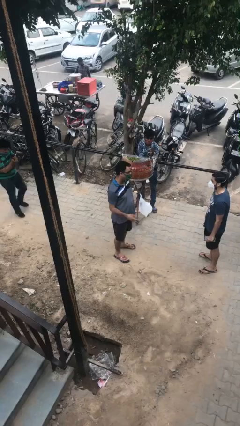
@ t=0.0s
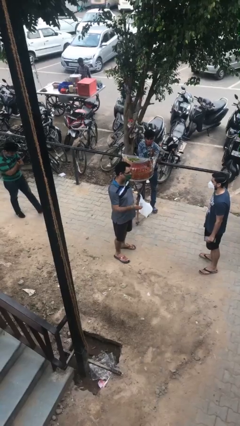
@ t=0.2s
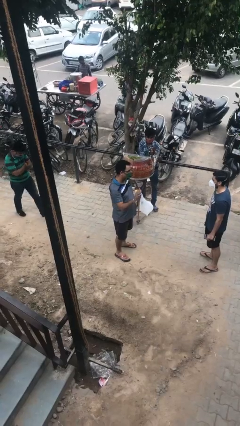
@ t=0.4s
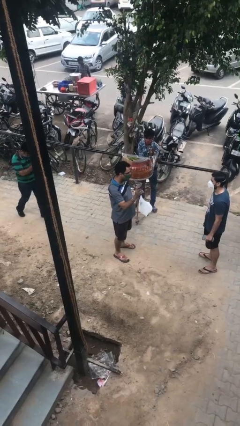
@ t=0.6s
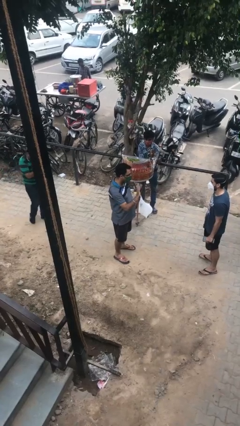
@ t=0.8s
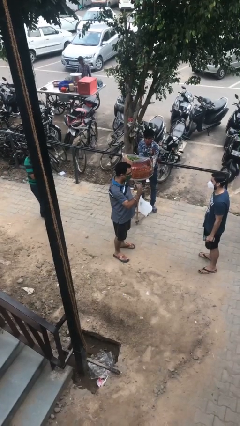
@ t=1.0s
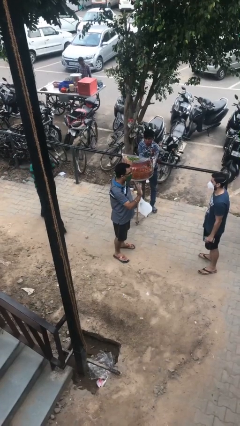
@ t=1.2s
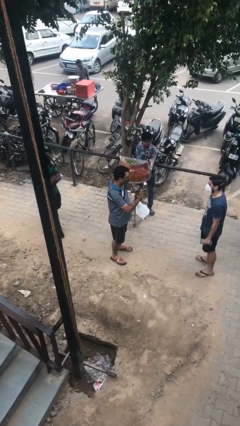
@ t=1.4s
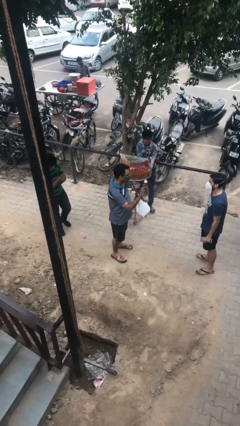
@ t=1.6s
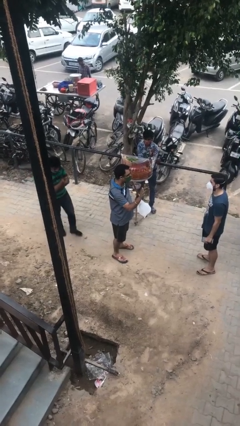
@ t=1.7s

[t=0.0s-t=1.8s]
person waves at person

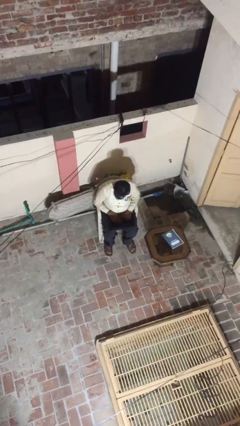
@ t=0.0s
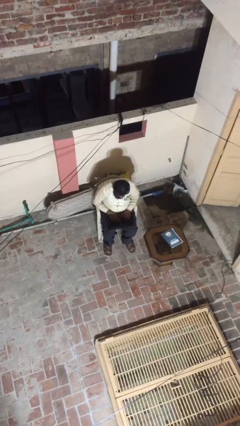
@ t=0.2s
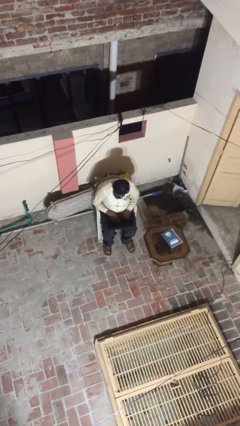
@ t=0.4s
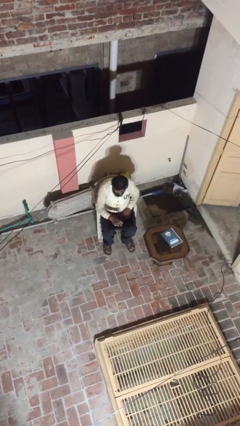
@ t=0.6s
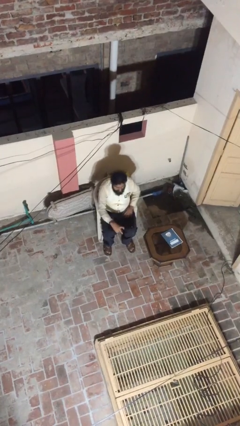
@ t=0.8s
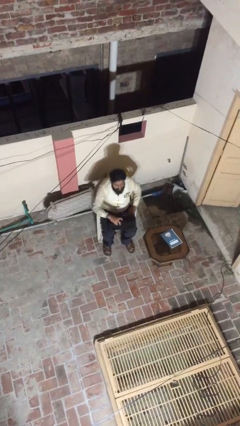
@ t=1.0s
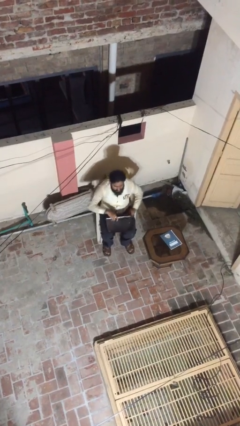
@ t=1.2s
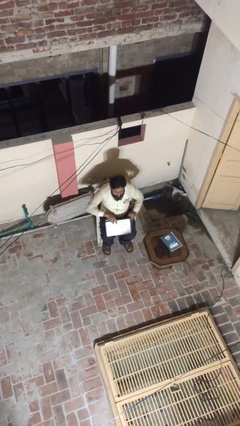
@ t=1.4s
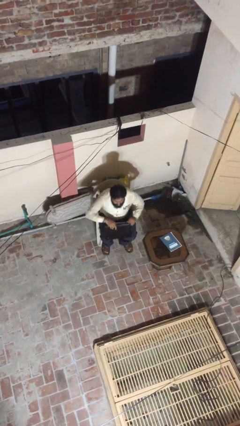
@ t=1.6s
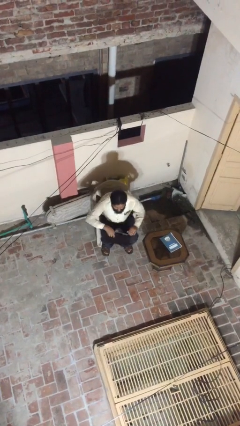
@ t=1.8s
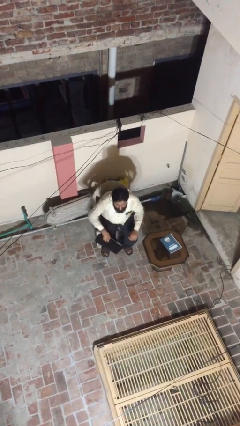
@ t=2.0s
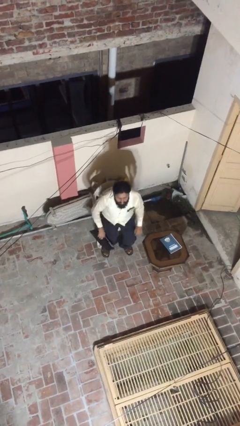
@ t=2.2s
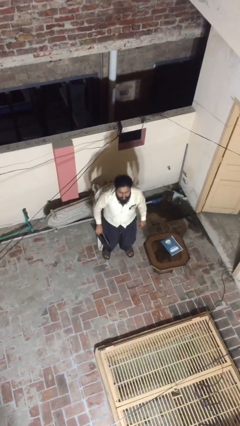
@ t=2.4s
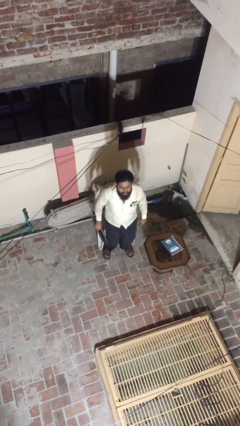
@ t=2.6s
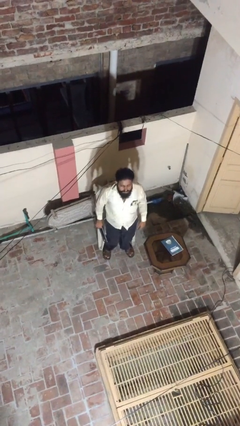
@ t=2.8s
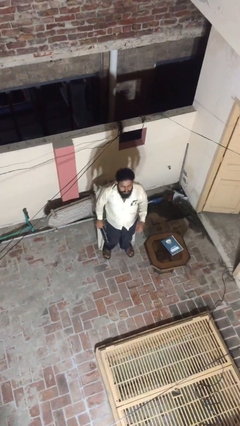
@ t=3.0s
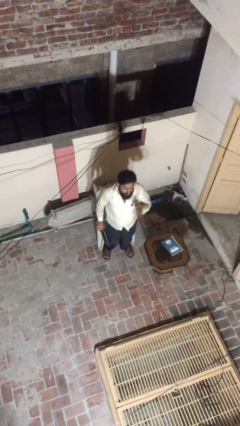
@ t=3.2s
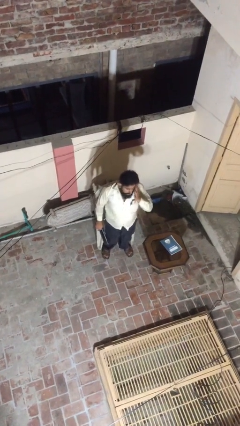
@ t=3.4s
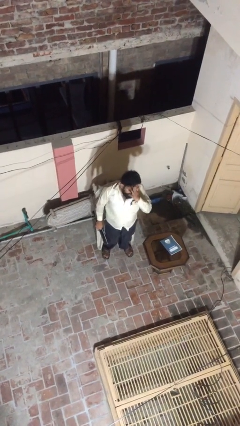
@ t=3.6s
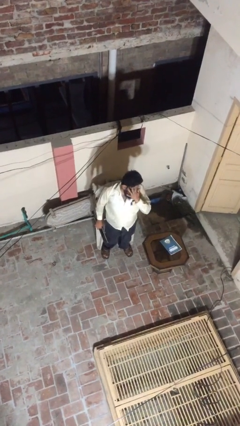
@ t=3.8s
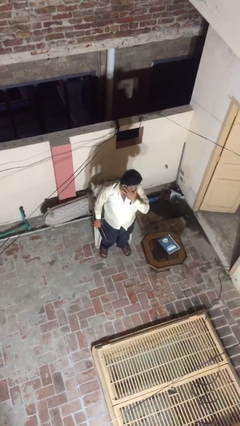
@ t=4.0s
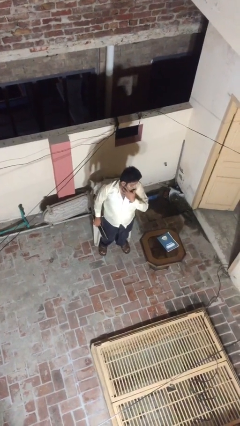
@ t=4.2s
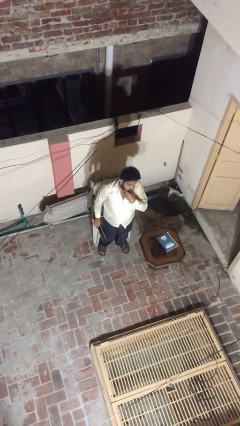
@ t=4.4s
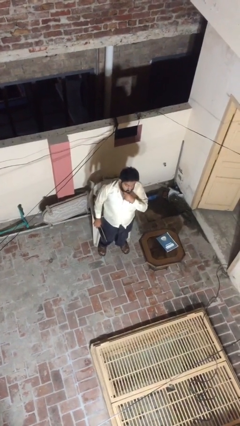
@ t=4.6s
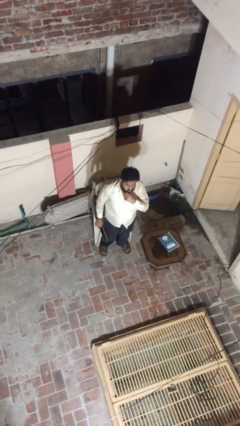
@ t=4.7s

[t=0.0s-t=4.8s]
person stands up

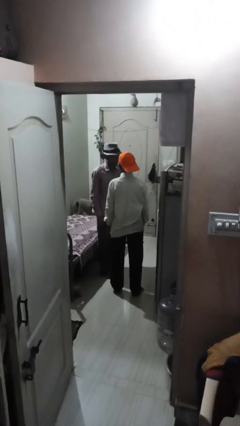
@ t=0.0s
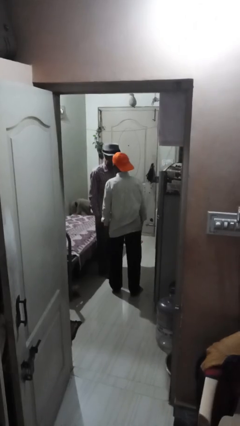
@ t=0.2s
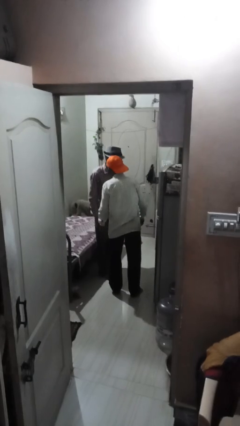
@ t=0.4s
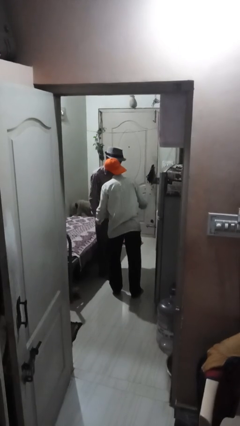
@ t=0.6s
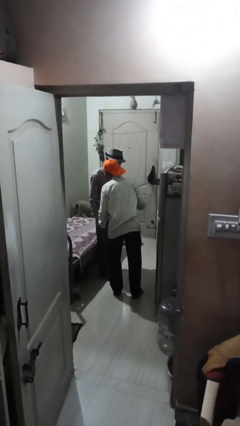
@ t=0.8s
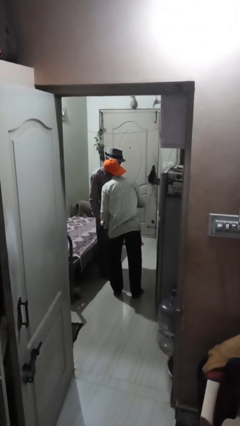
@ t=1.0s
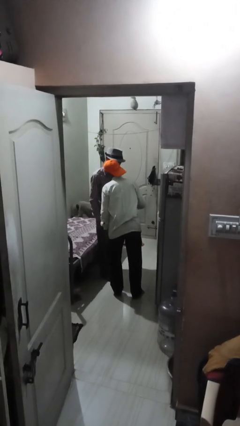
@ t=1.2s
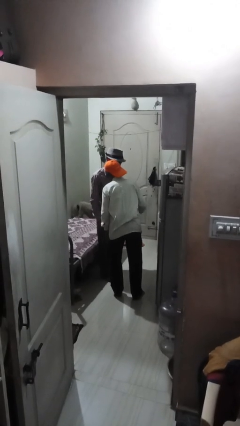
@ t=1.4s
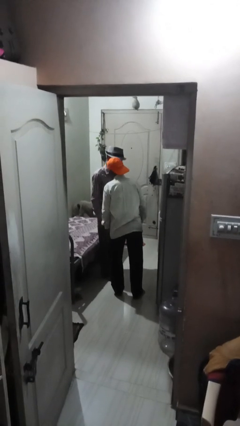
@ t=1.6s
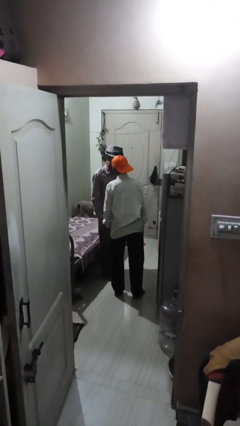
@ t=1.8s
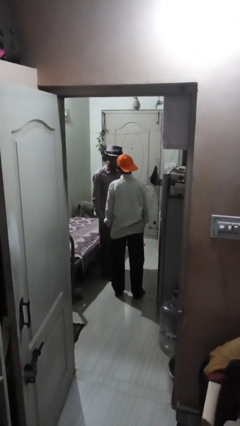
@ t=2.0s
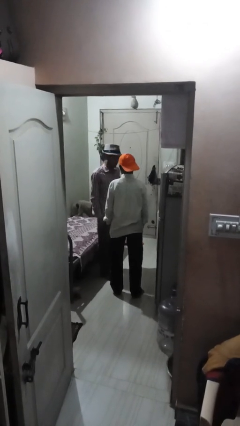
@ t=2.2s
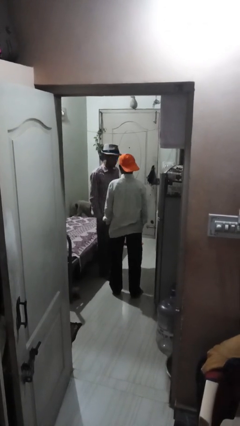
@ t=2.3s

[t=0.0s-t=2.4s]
person kisses cheek of person

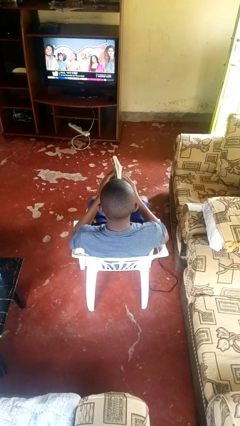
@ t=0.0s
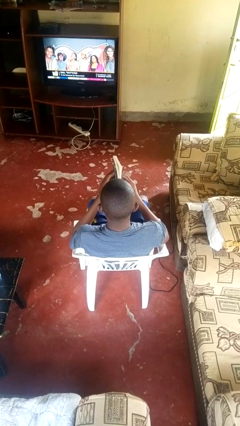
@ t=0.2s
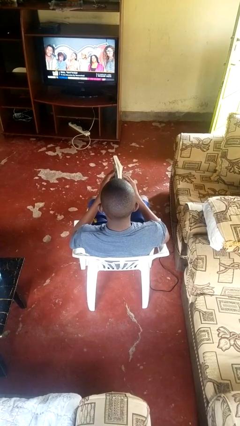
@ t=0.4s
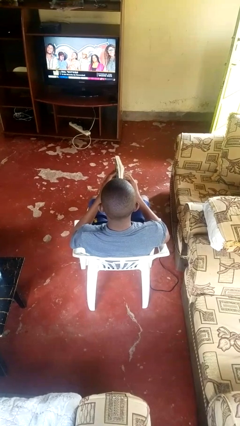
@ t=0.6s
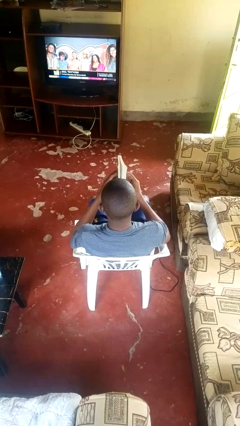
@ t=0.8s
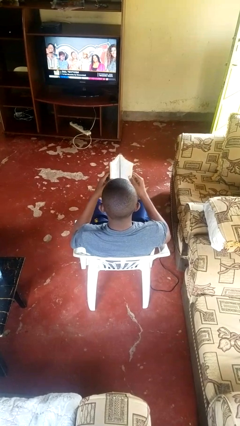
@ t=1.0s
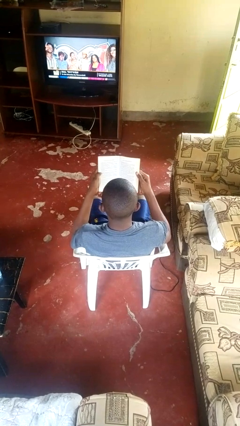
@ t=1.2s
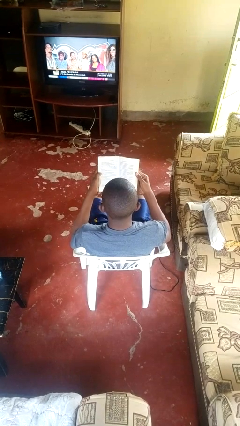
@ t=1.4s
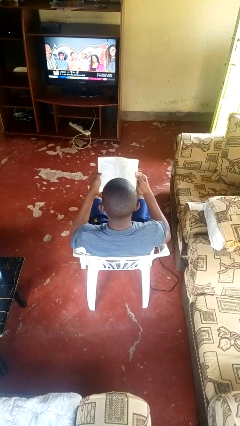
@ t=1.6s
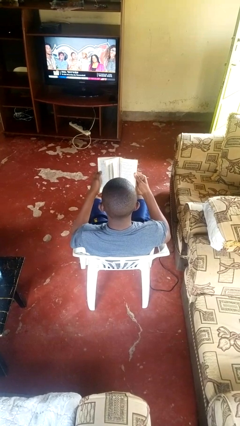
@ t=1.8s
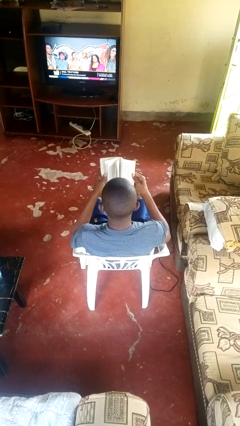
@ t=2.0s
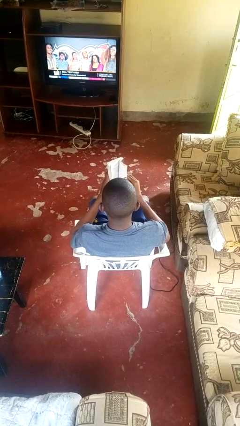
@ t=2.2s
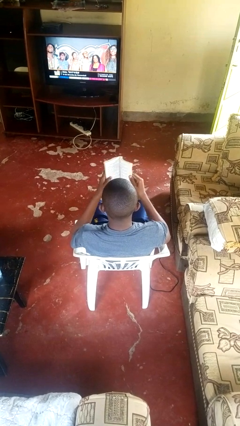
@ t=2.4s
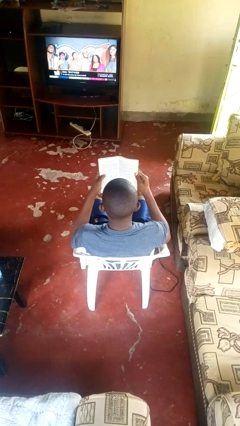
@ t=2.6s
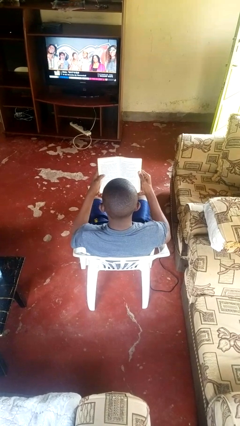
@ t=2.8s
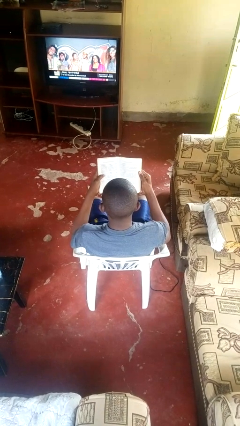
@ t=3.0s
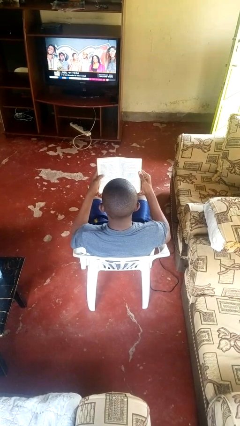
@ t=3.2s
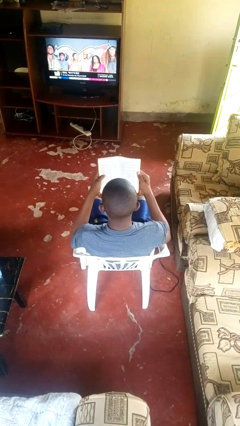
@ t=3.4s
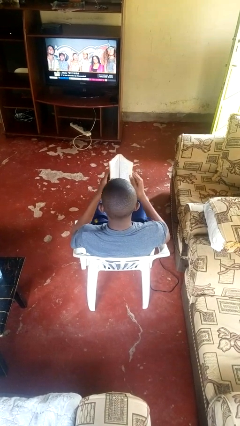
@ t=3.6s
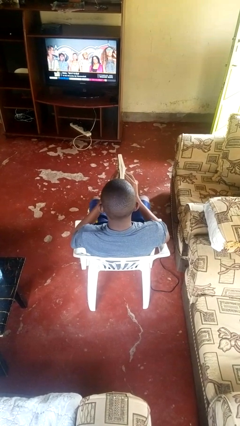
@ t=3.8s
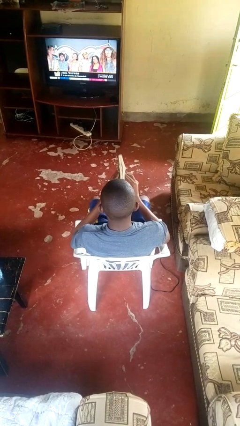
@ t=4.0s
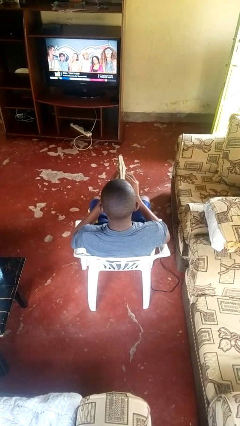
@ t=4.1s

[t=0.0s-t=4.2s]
person reads book

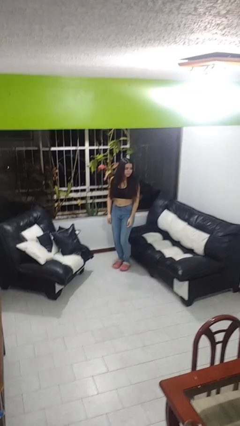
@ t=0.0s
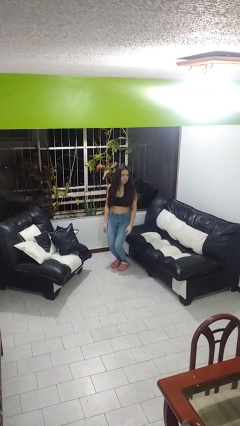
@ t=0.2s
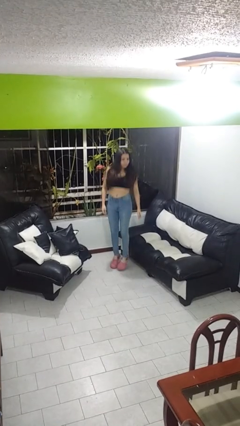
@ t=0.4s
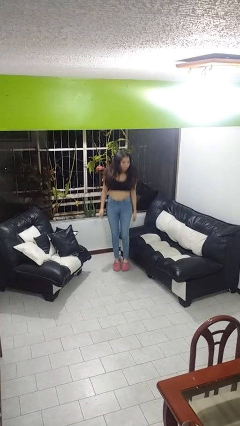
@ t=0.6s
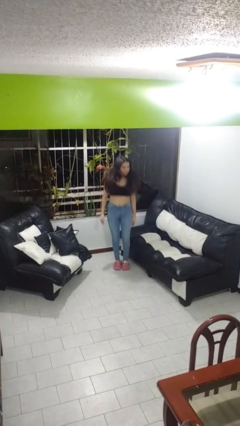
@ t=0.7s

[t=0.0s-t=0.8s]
person jumps

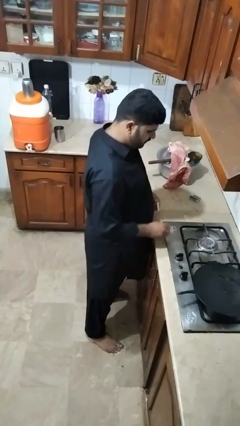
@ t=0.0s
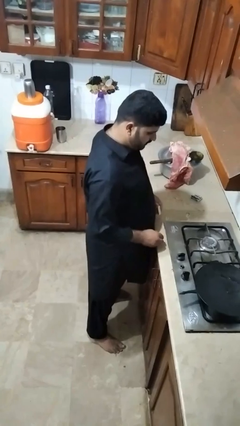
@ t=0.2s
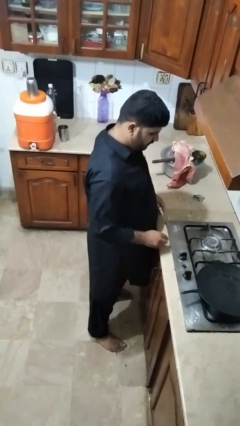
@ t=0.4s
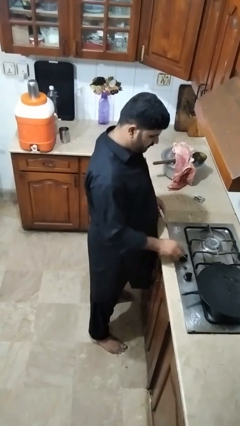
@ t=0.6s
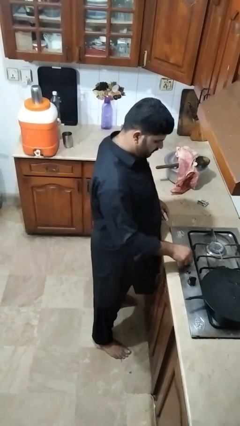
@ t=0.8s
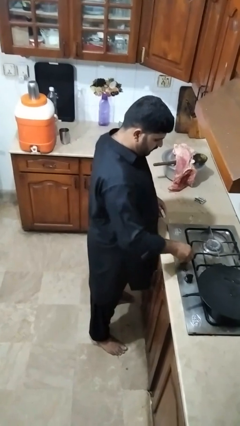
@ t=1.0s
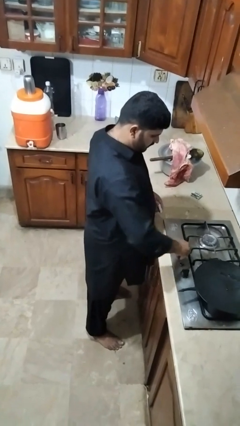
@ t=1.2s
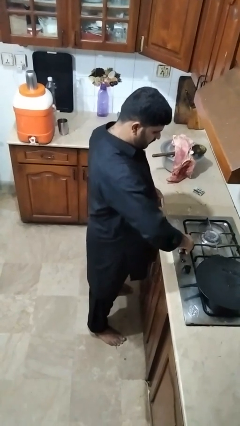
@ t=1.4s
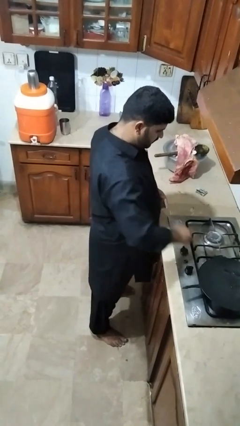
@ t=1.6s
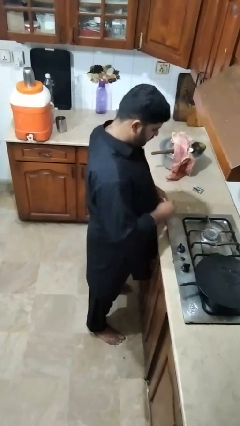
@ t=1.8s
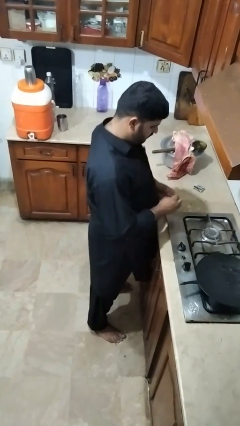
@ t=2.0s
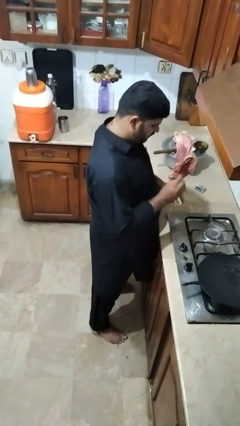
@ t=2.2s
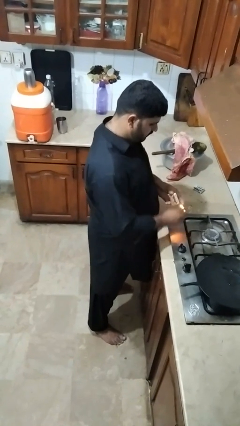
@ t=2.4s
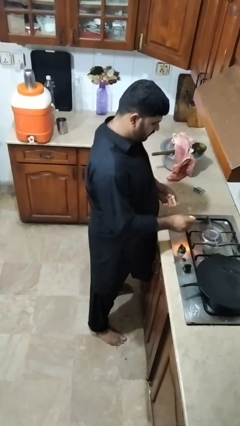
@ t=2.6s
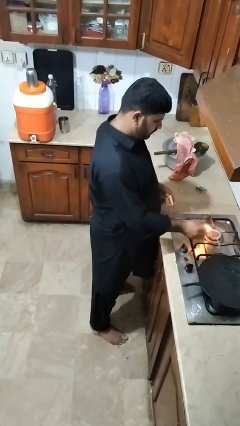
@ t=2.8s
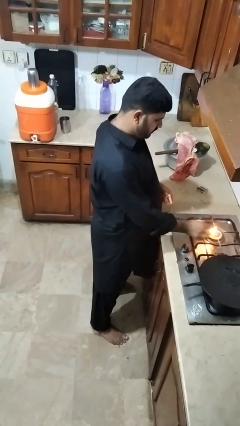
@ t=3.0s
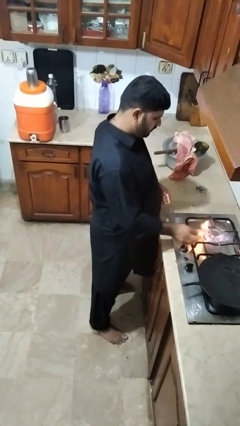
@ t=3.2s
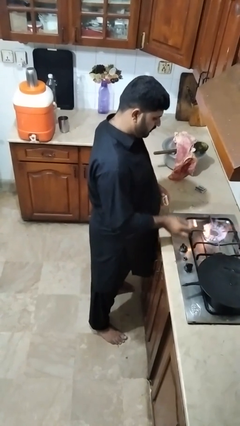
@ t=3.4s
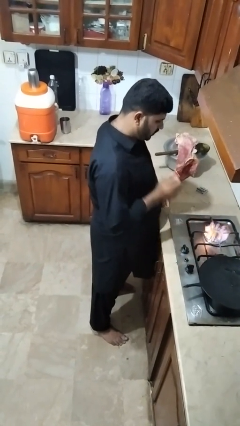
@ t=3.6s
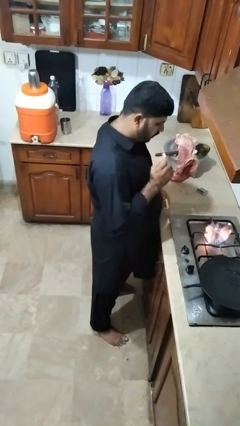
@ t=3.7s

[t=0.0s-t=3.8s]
person turns on stovetop
